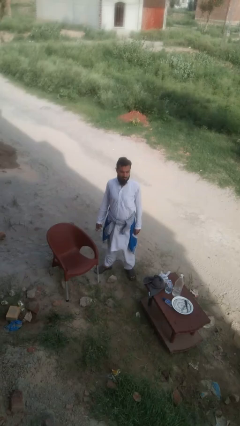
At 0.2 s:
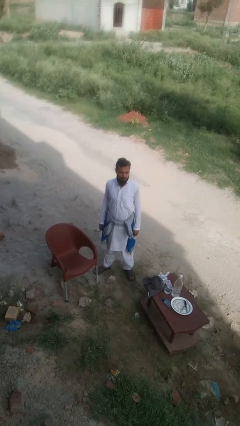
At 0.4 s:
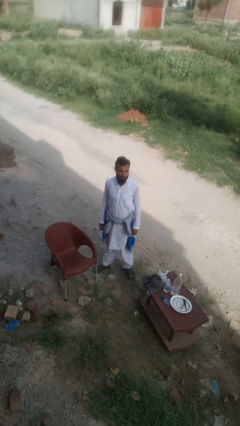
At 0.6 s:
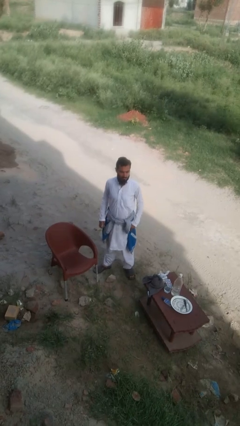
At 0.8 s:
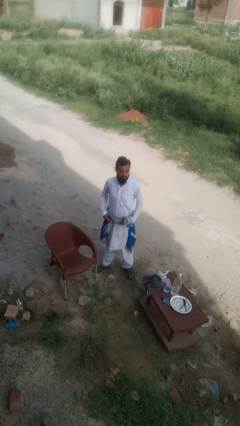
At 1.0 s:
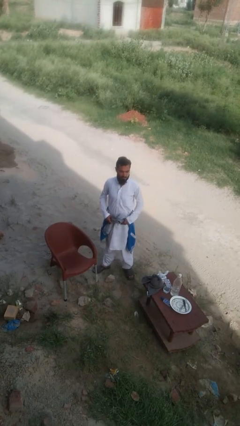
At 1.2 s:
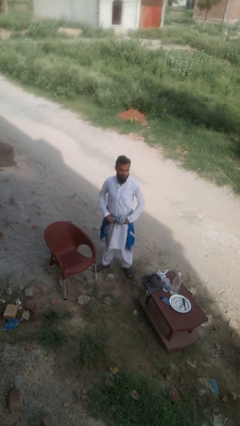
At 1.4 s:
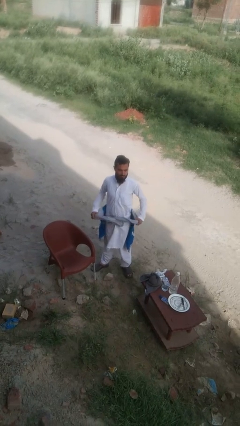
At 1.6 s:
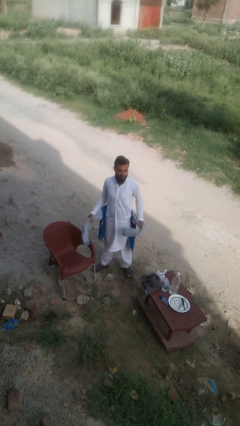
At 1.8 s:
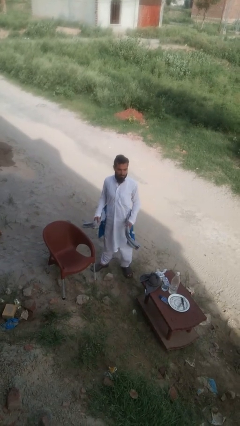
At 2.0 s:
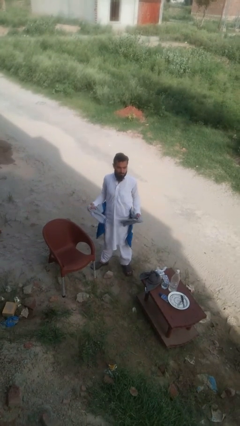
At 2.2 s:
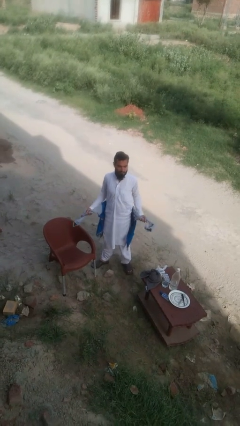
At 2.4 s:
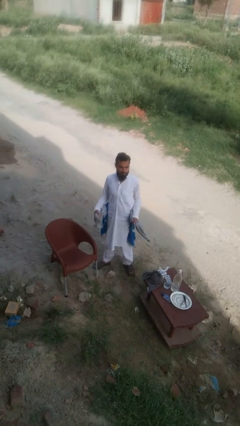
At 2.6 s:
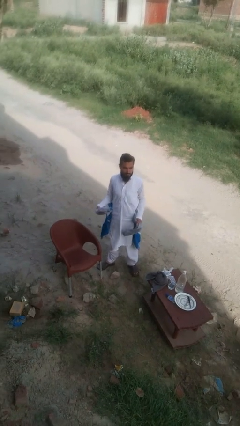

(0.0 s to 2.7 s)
person unties jacket around waist

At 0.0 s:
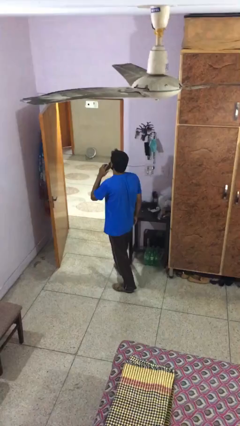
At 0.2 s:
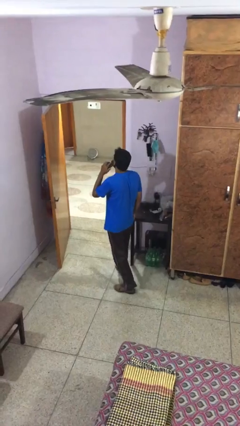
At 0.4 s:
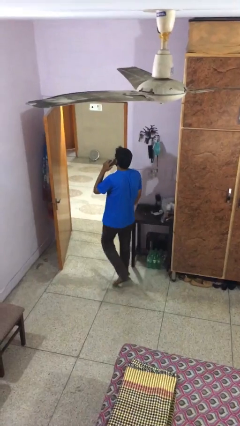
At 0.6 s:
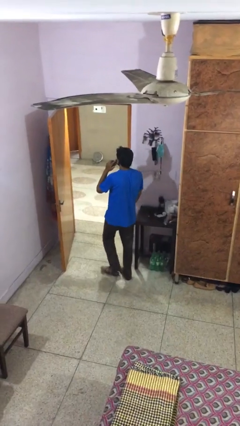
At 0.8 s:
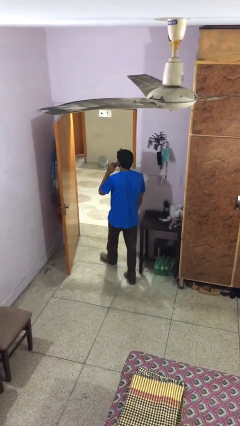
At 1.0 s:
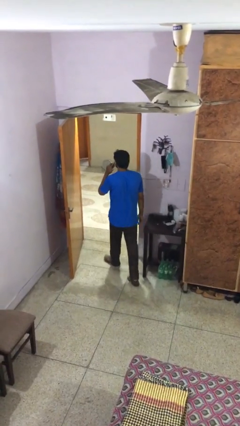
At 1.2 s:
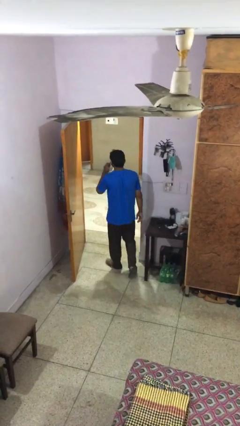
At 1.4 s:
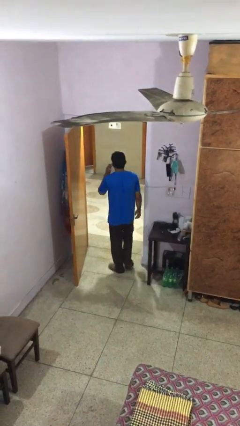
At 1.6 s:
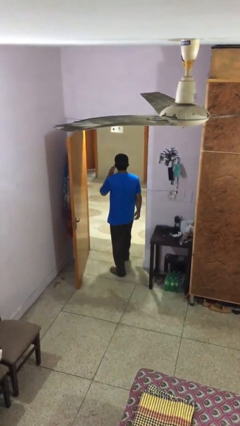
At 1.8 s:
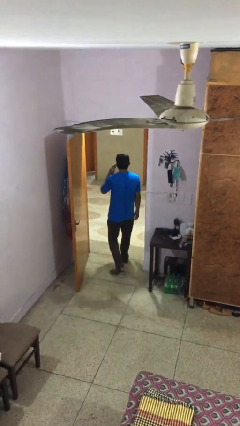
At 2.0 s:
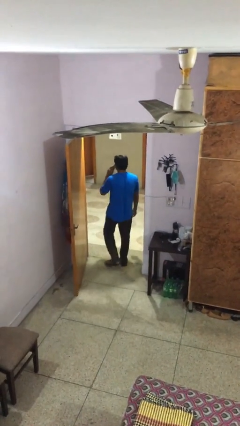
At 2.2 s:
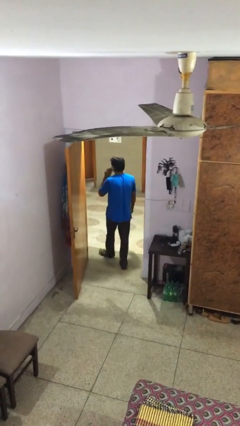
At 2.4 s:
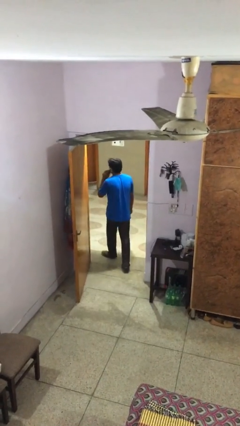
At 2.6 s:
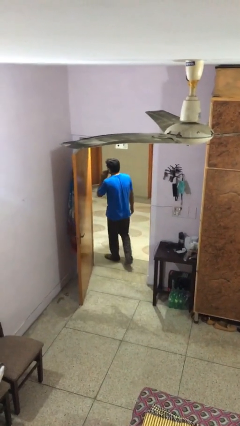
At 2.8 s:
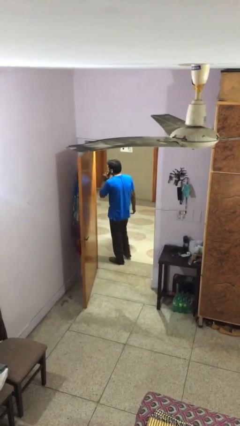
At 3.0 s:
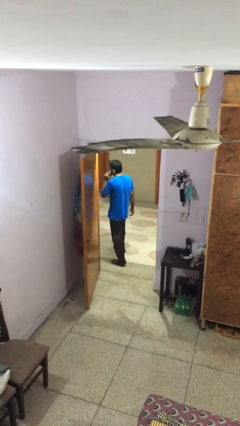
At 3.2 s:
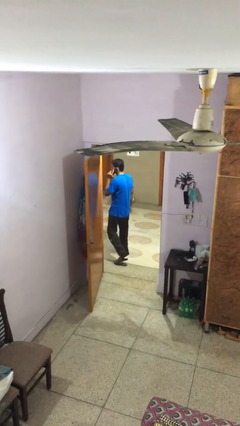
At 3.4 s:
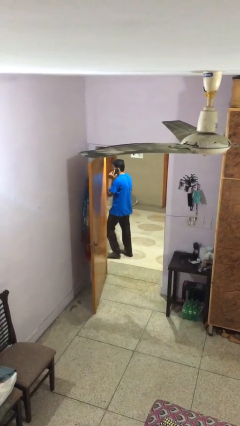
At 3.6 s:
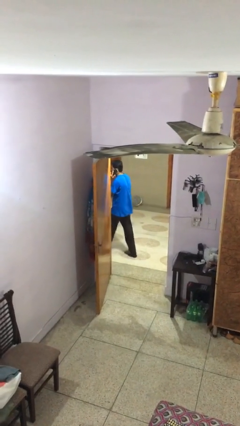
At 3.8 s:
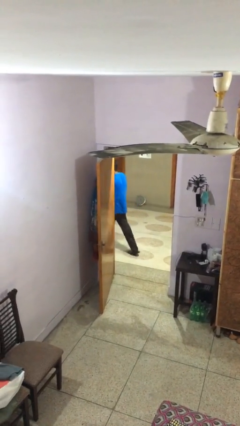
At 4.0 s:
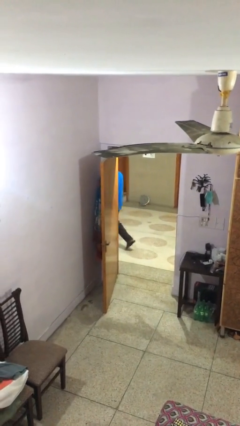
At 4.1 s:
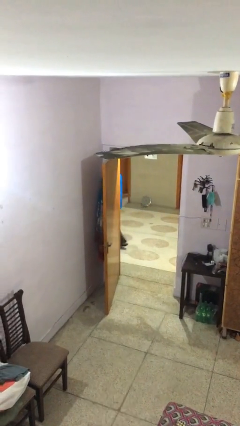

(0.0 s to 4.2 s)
person exits scene through structure

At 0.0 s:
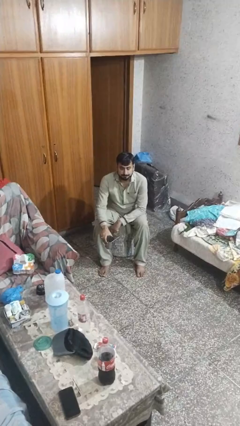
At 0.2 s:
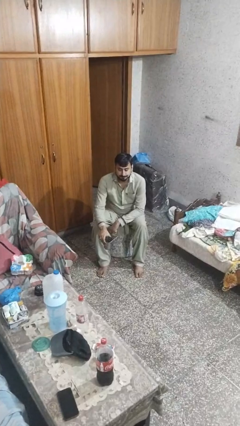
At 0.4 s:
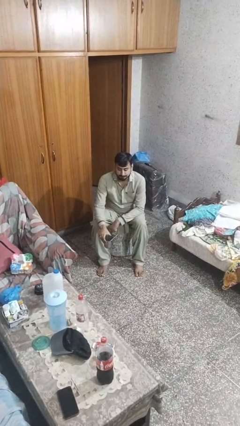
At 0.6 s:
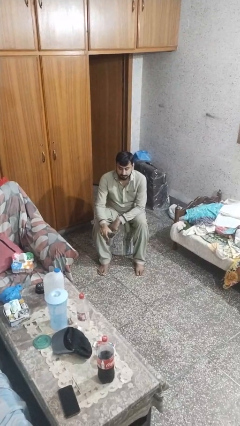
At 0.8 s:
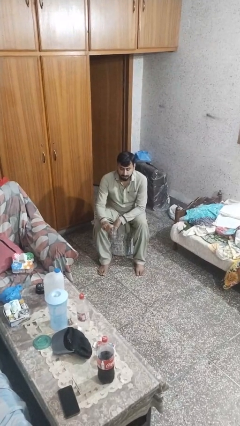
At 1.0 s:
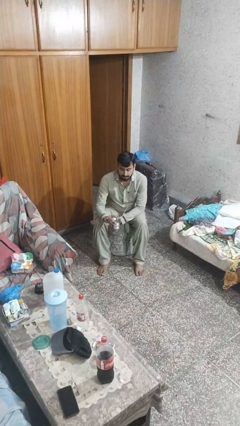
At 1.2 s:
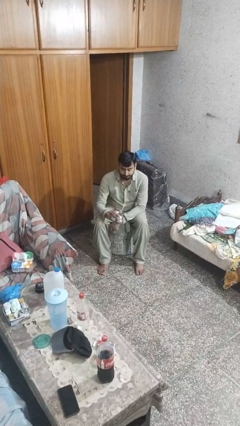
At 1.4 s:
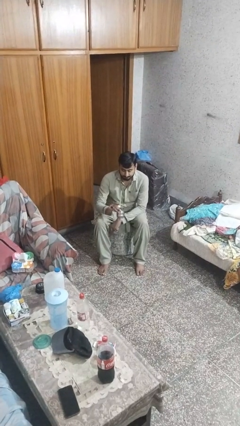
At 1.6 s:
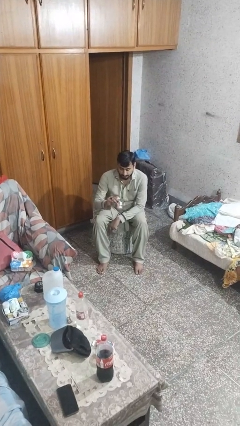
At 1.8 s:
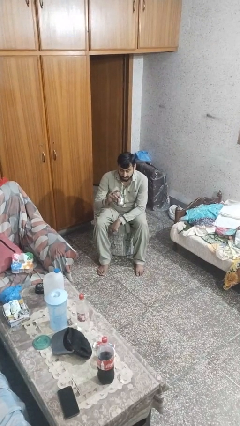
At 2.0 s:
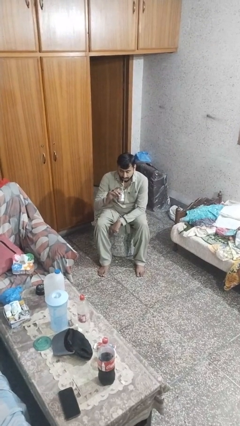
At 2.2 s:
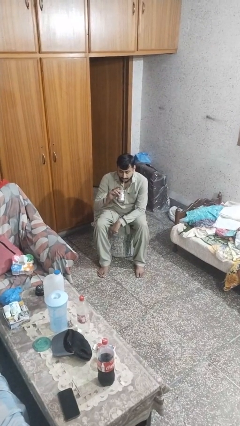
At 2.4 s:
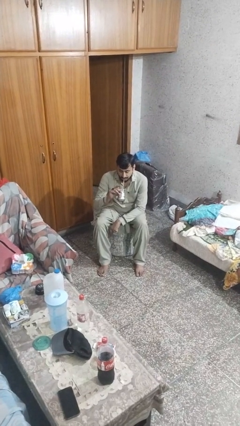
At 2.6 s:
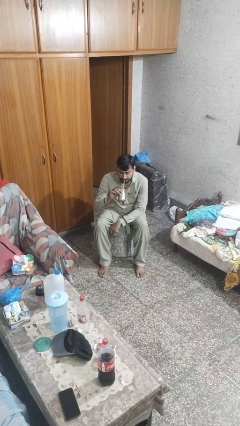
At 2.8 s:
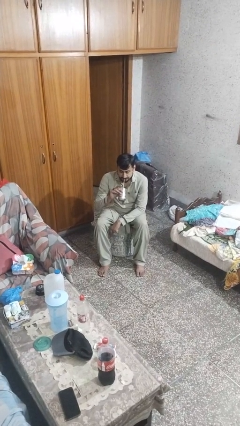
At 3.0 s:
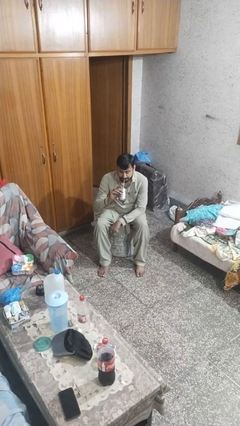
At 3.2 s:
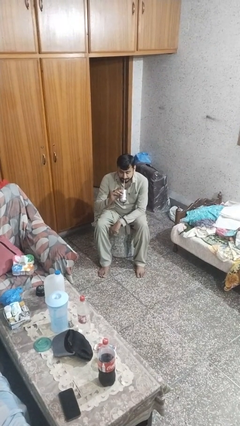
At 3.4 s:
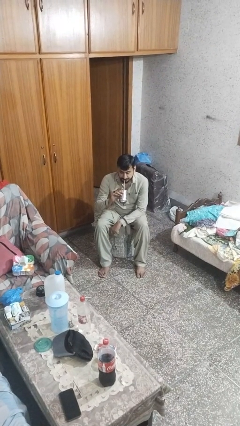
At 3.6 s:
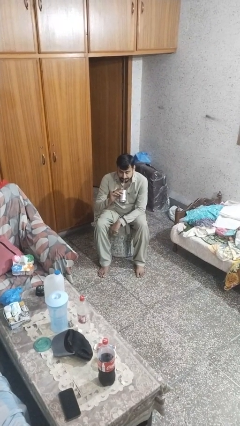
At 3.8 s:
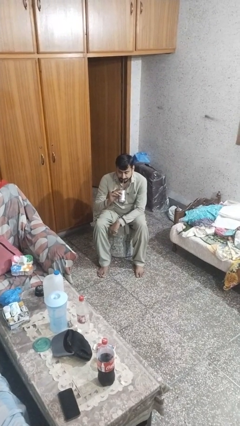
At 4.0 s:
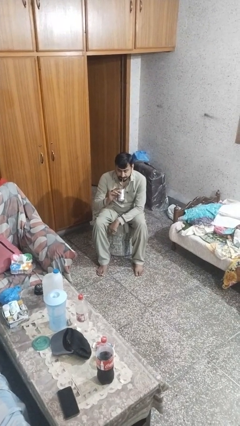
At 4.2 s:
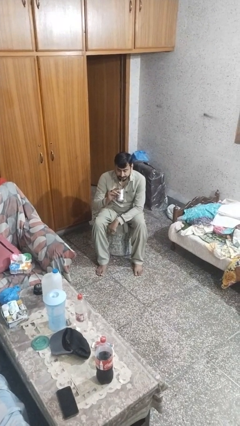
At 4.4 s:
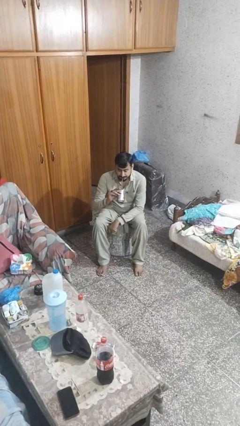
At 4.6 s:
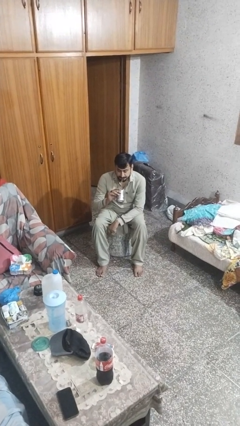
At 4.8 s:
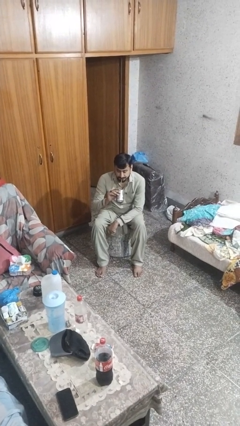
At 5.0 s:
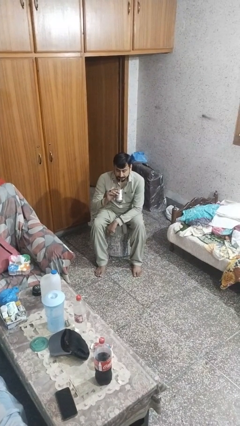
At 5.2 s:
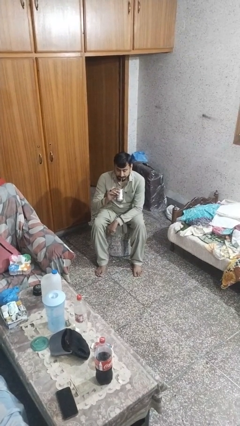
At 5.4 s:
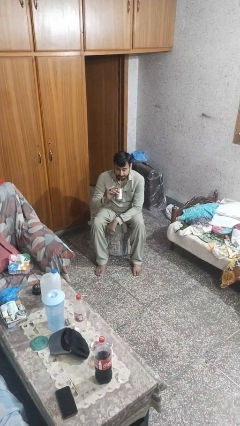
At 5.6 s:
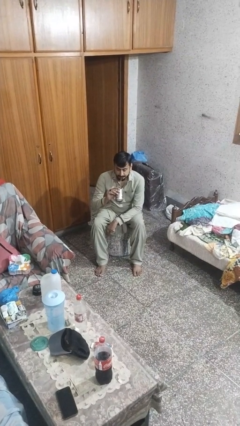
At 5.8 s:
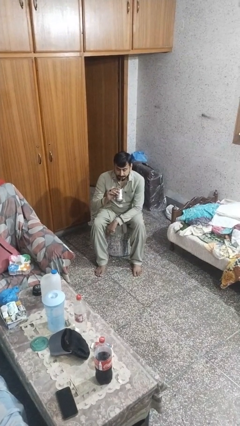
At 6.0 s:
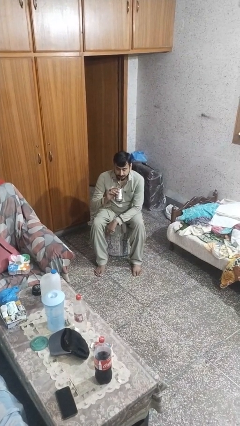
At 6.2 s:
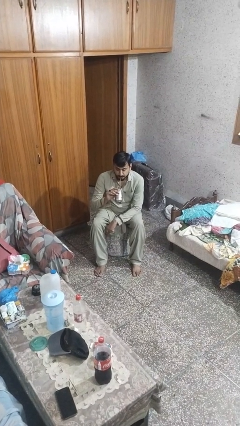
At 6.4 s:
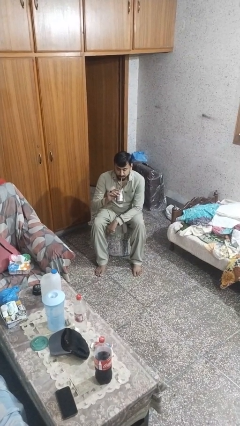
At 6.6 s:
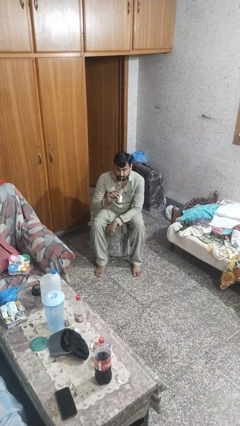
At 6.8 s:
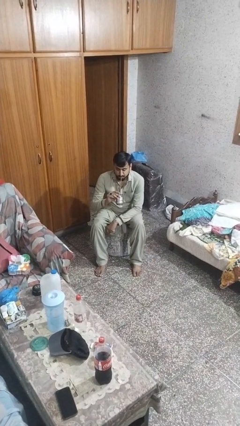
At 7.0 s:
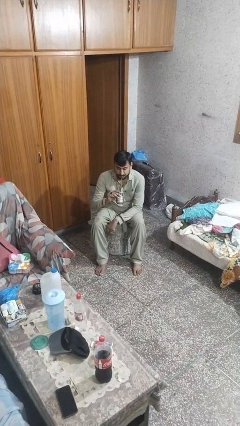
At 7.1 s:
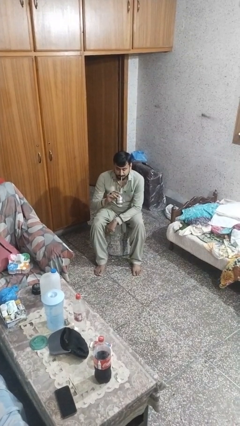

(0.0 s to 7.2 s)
person drinks from straw

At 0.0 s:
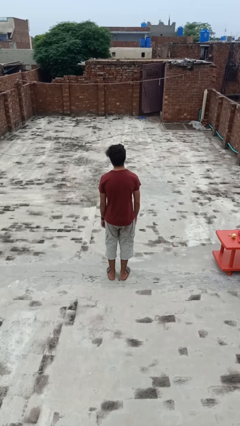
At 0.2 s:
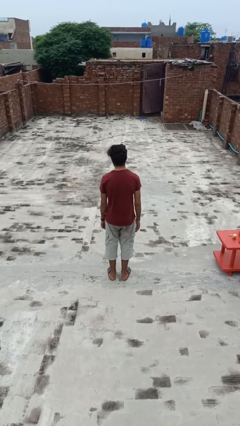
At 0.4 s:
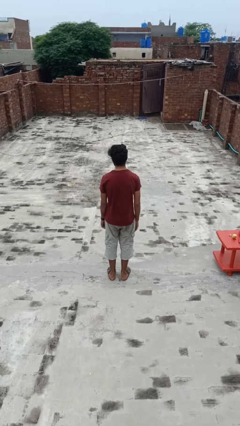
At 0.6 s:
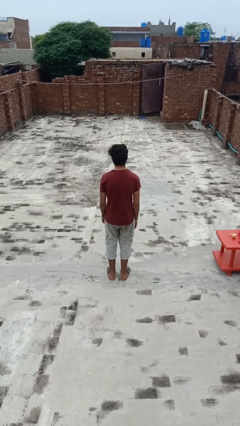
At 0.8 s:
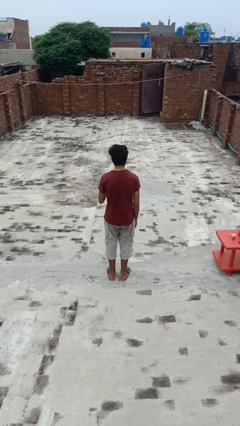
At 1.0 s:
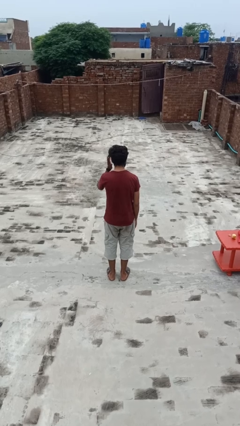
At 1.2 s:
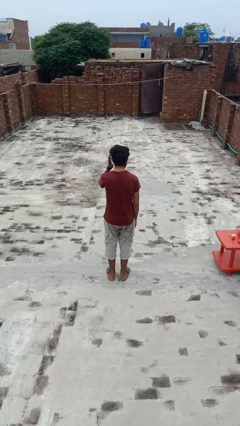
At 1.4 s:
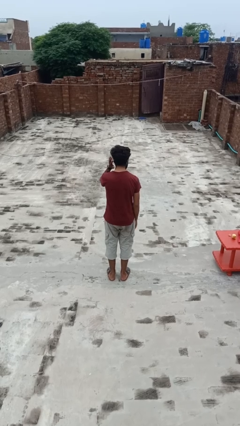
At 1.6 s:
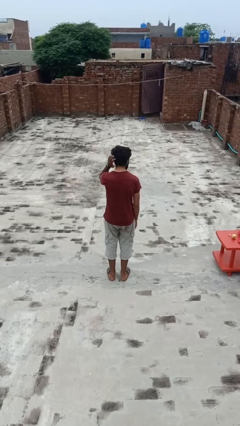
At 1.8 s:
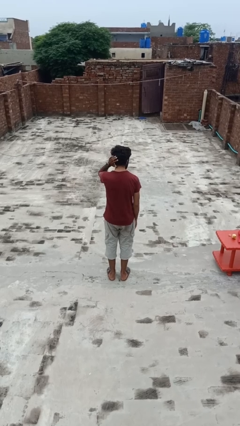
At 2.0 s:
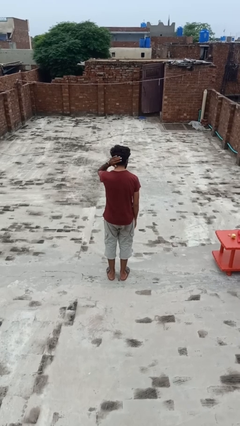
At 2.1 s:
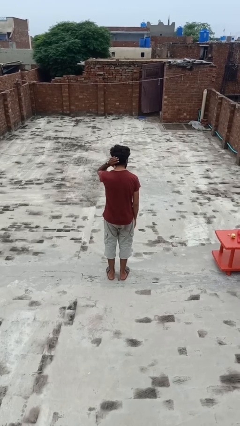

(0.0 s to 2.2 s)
person pats head

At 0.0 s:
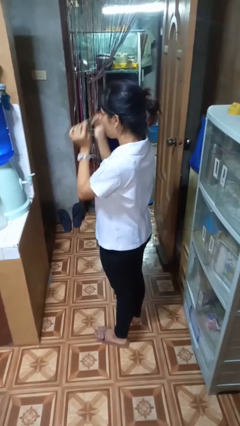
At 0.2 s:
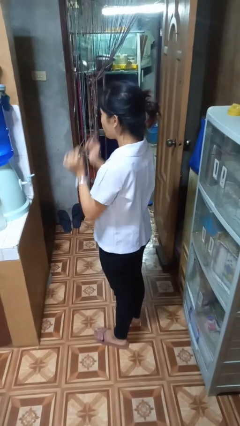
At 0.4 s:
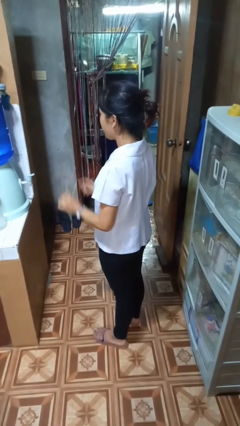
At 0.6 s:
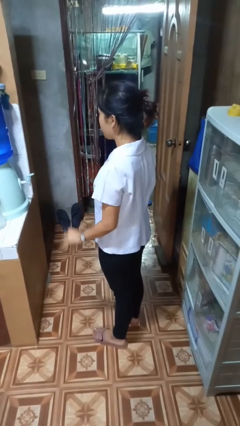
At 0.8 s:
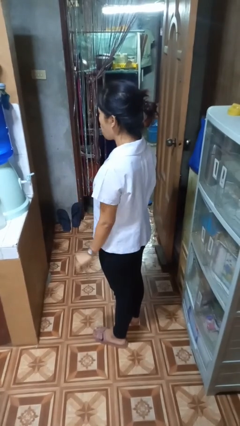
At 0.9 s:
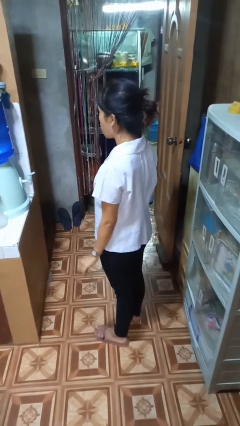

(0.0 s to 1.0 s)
person takes off glasses
